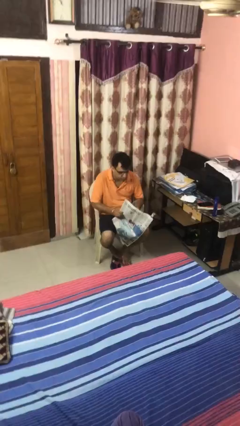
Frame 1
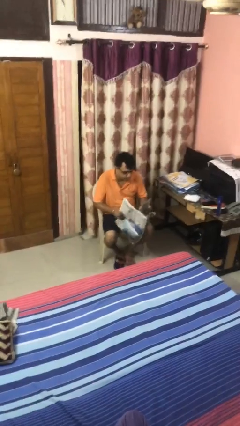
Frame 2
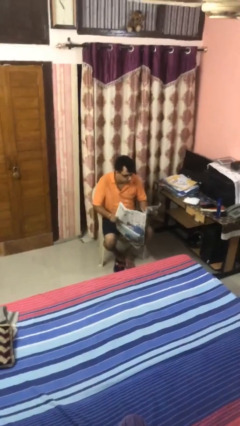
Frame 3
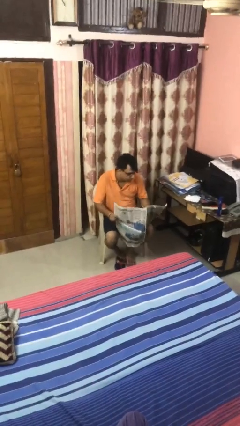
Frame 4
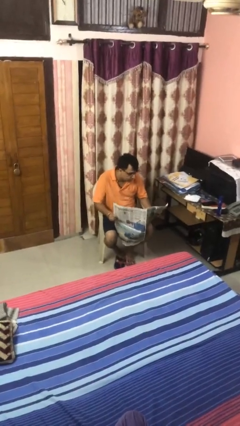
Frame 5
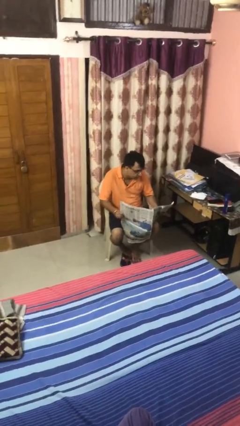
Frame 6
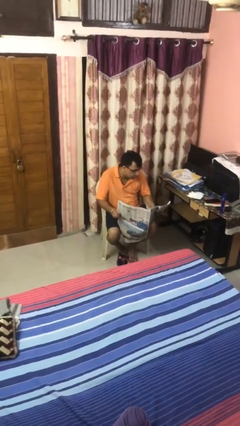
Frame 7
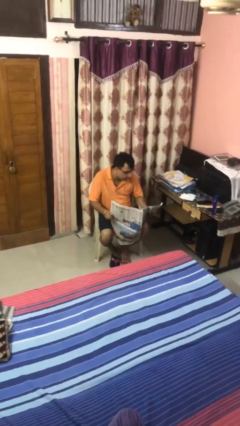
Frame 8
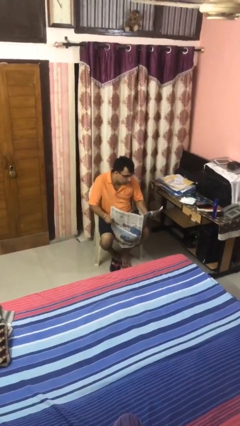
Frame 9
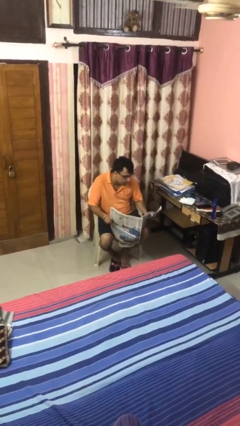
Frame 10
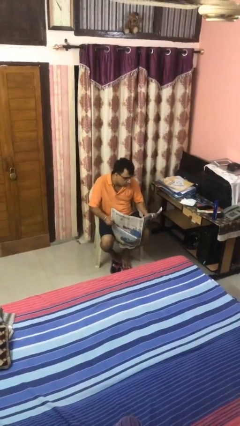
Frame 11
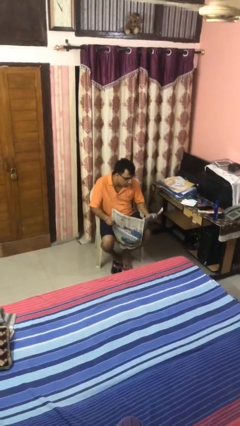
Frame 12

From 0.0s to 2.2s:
person reads newspaper

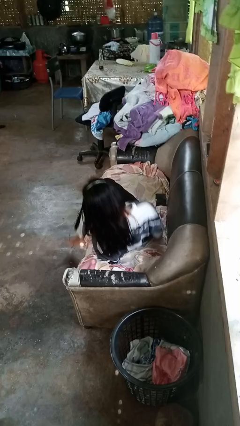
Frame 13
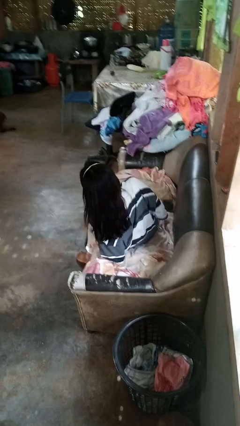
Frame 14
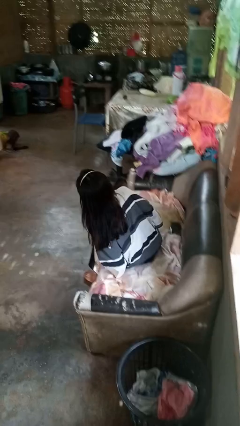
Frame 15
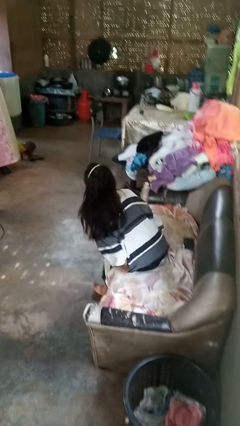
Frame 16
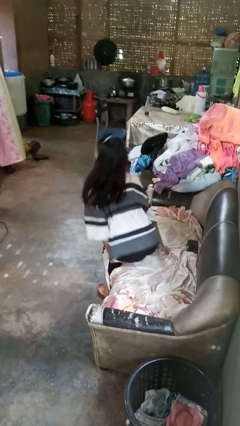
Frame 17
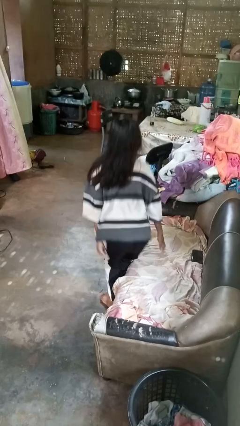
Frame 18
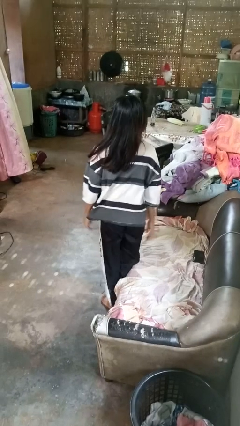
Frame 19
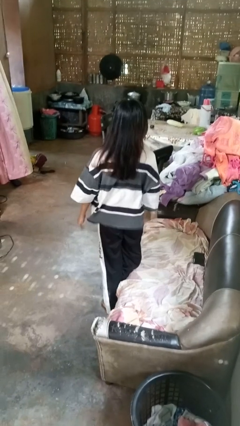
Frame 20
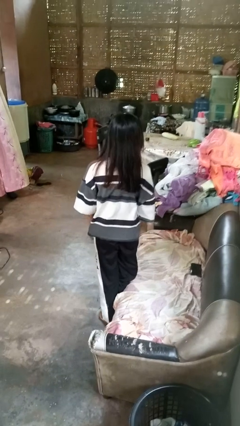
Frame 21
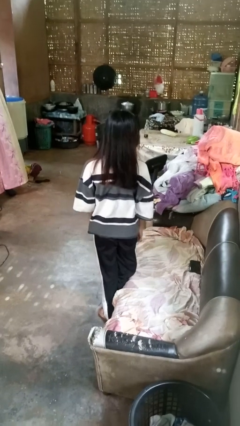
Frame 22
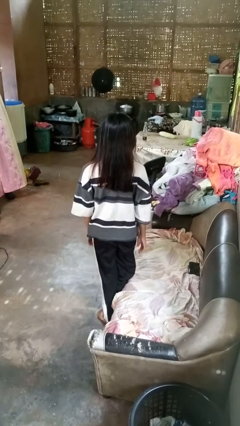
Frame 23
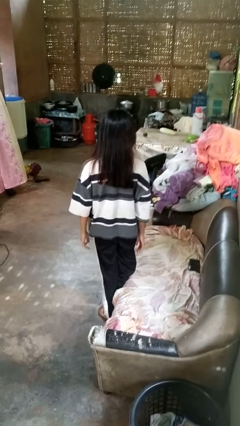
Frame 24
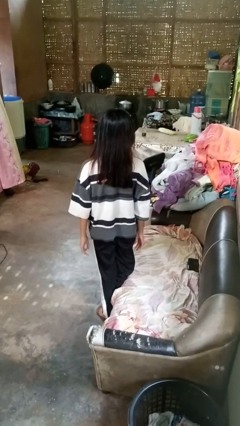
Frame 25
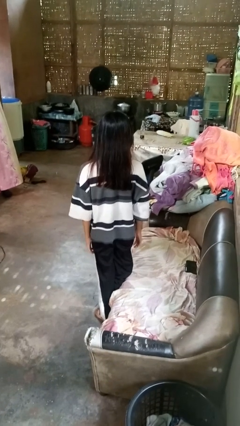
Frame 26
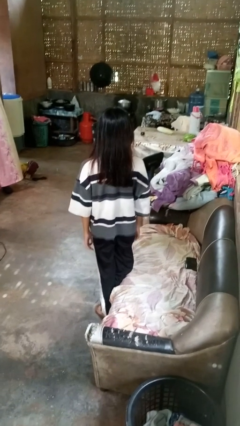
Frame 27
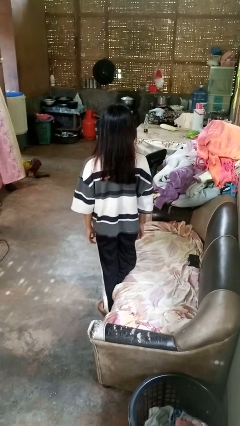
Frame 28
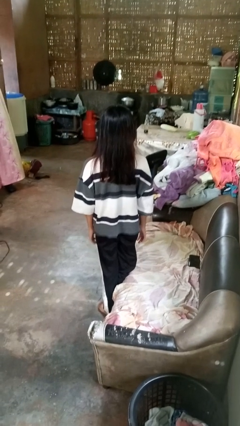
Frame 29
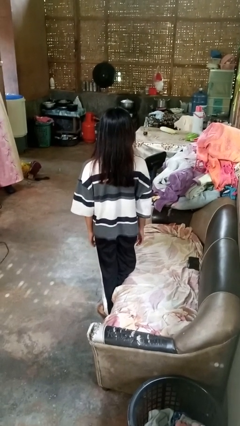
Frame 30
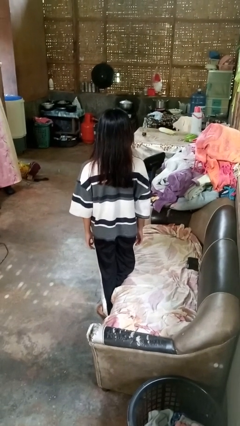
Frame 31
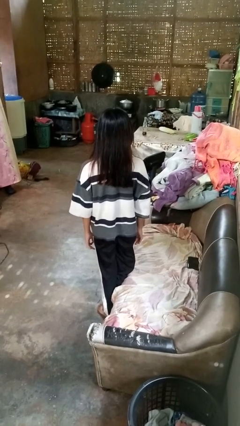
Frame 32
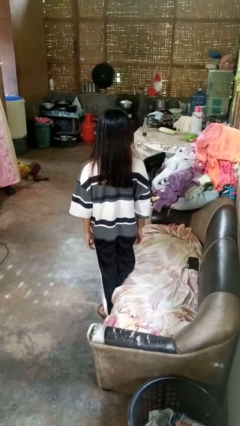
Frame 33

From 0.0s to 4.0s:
person stands up

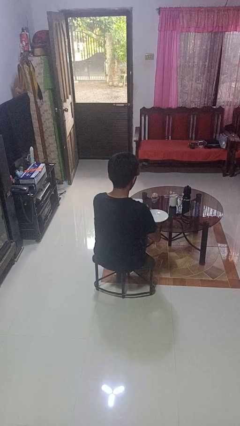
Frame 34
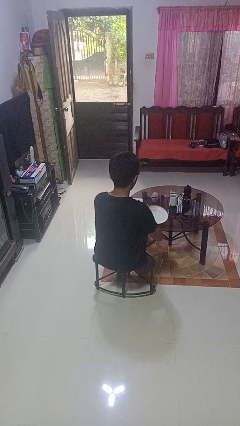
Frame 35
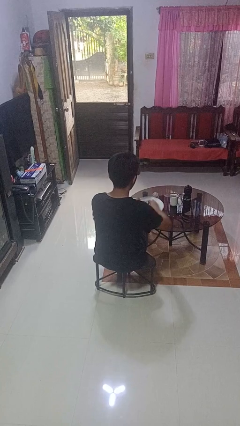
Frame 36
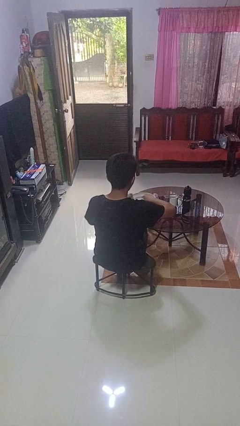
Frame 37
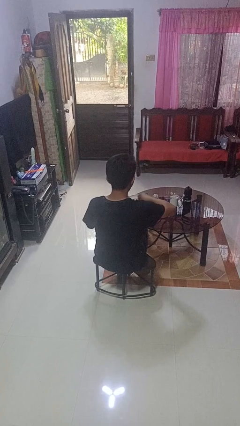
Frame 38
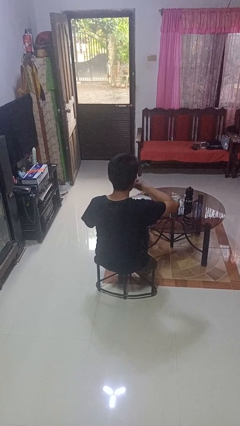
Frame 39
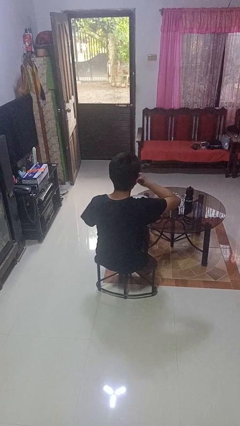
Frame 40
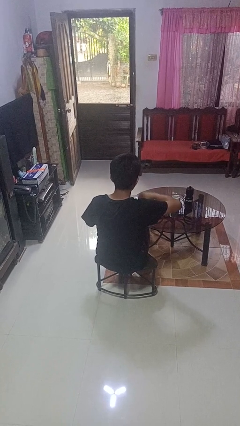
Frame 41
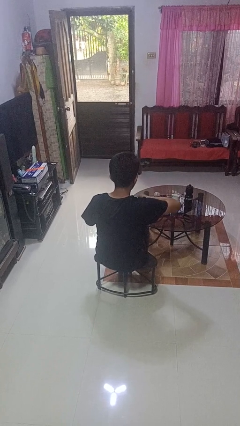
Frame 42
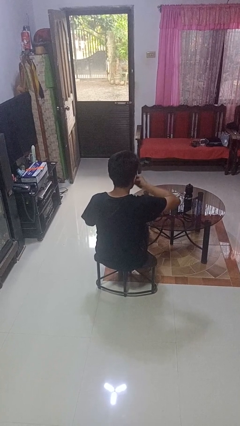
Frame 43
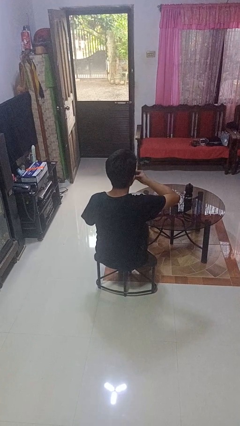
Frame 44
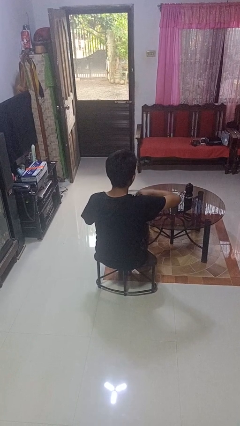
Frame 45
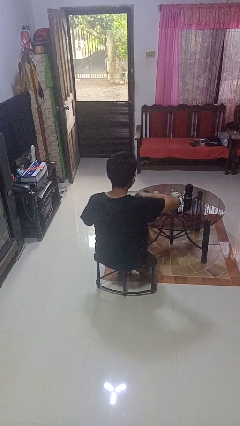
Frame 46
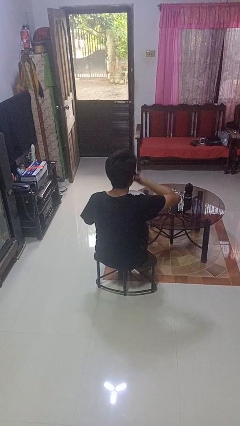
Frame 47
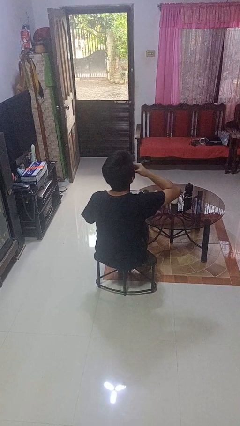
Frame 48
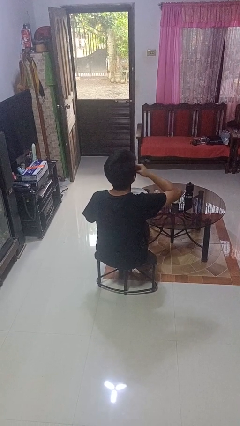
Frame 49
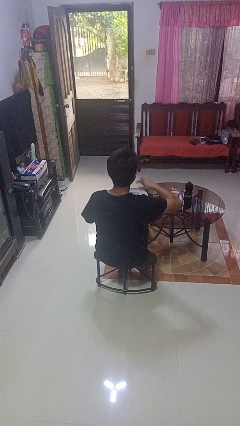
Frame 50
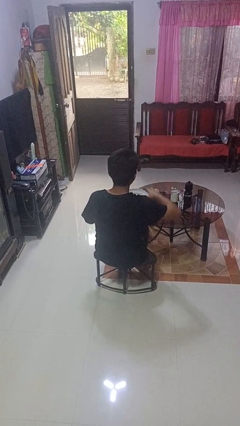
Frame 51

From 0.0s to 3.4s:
person eats with hands

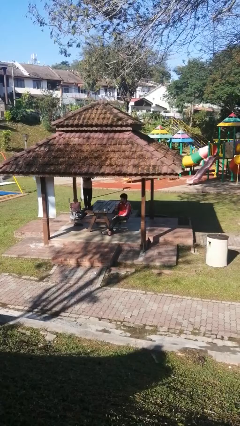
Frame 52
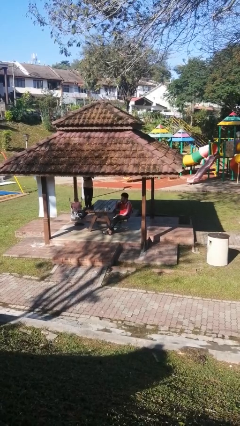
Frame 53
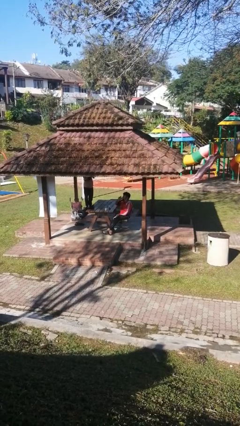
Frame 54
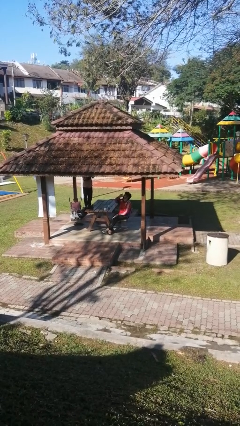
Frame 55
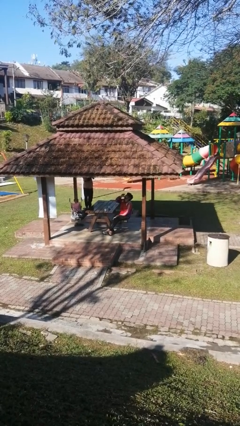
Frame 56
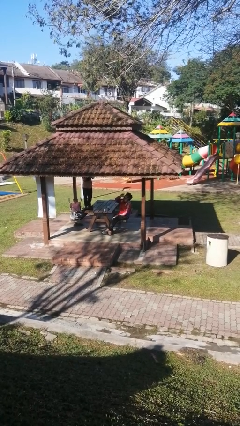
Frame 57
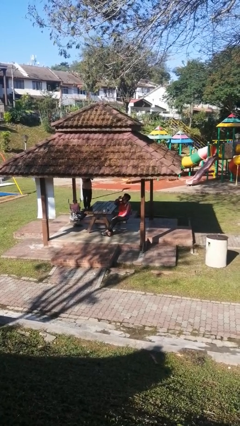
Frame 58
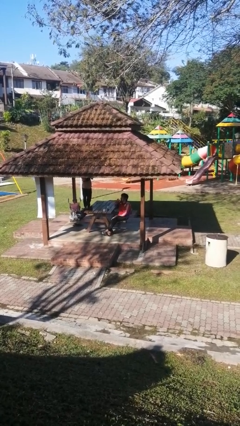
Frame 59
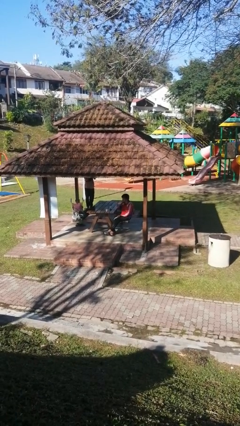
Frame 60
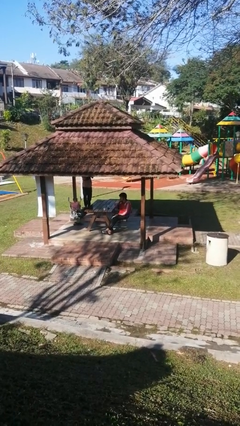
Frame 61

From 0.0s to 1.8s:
person drinks from shotglass

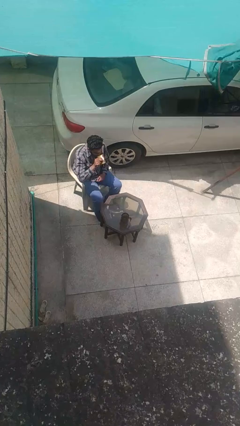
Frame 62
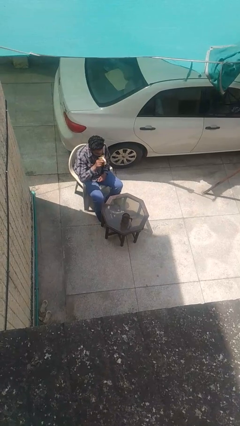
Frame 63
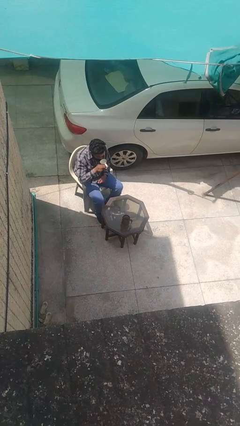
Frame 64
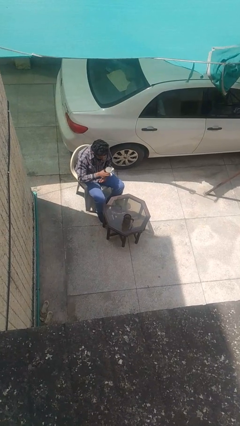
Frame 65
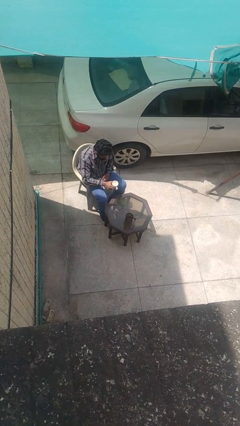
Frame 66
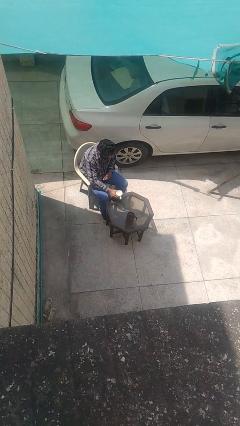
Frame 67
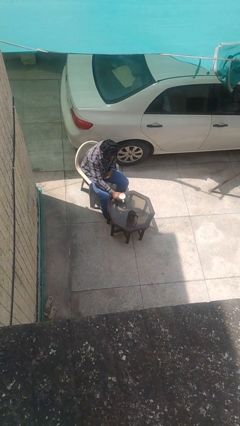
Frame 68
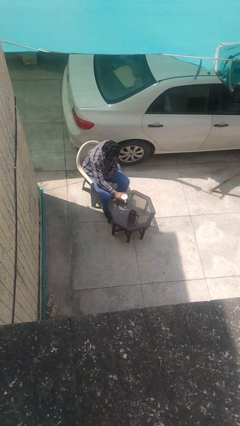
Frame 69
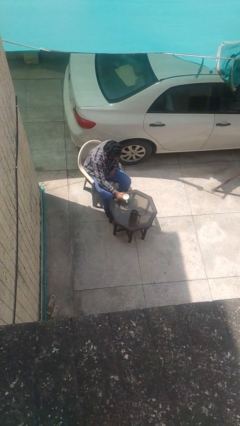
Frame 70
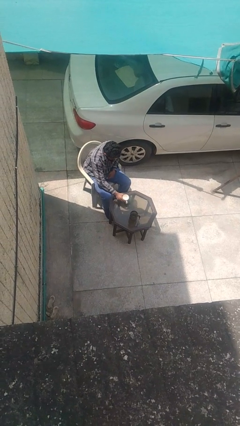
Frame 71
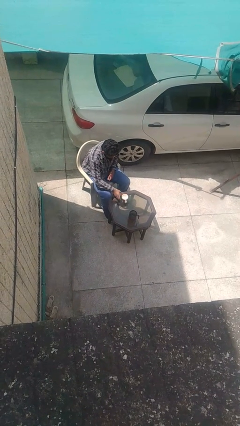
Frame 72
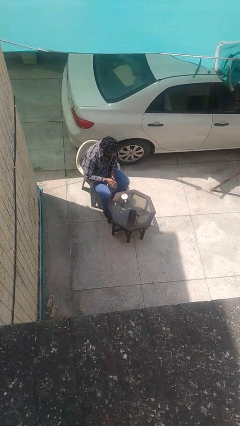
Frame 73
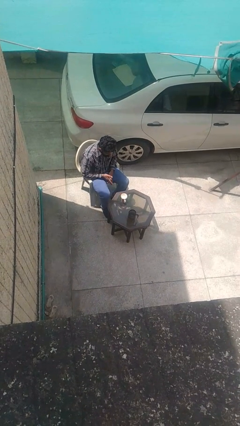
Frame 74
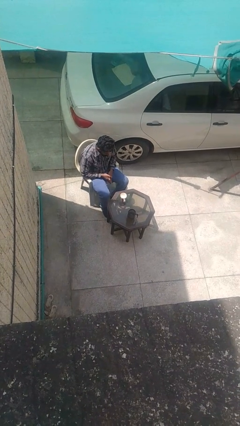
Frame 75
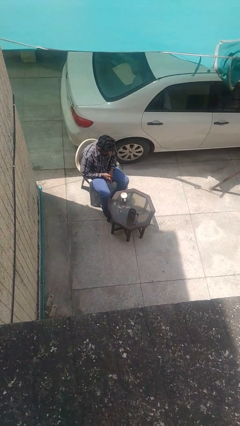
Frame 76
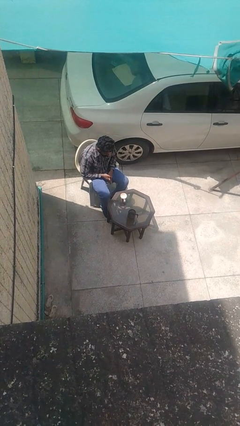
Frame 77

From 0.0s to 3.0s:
person puts down object on table

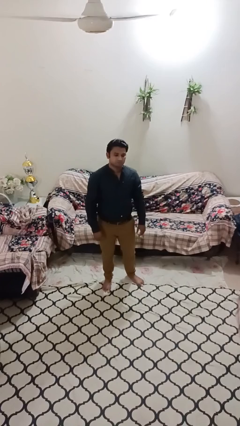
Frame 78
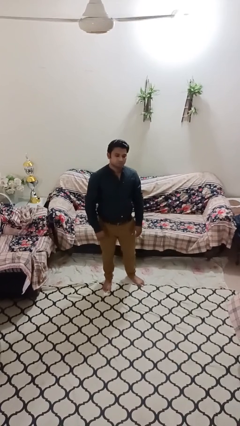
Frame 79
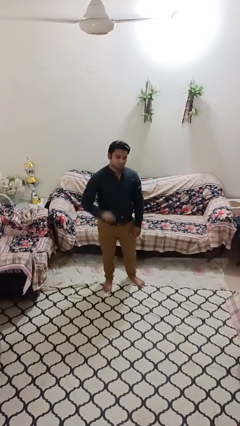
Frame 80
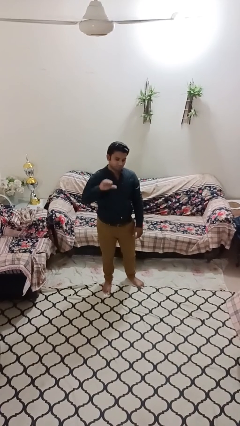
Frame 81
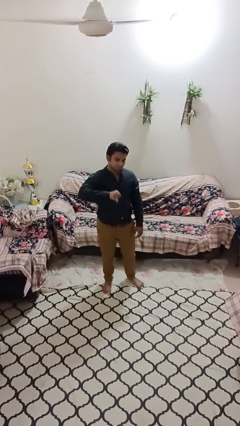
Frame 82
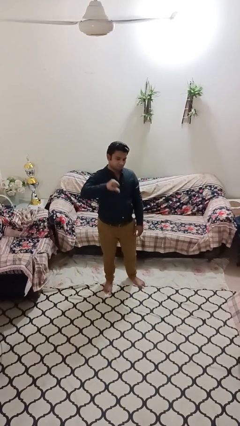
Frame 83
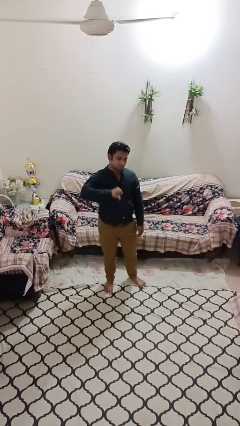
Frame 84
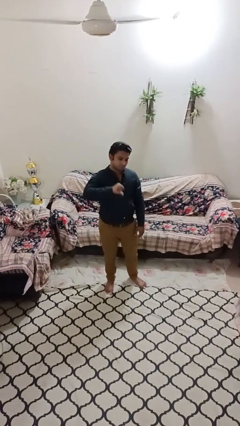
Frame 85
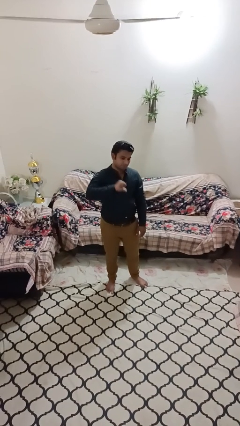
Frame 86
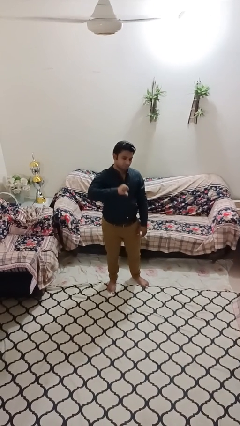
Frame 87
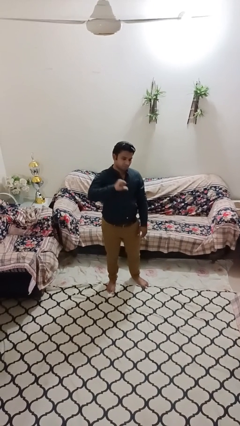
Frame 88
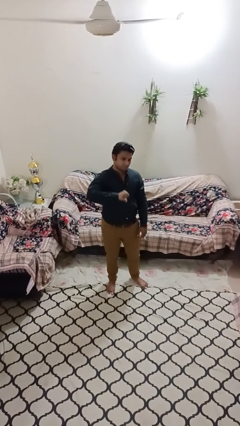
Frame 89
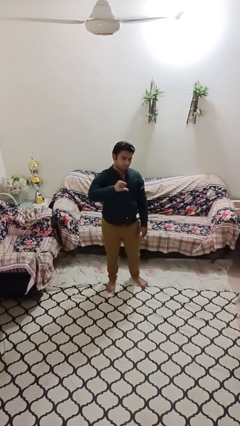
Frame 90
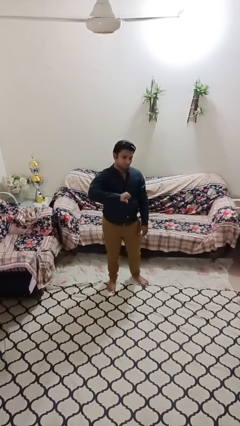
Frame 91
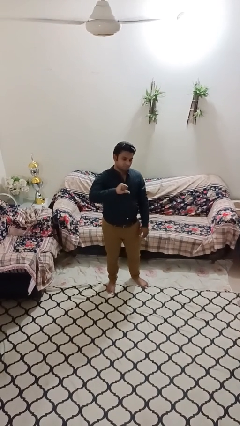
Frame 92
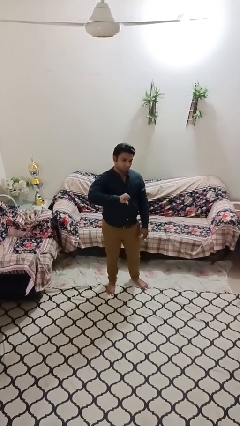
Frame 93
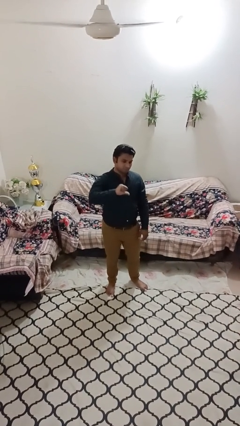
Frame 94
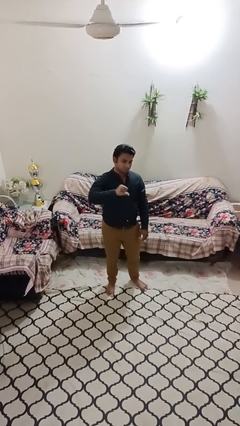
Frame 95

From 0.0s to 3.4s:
person gestures thumbs down
